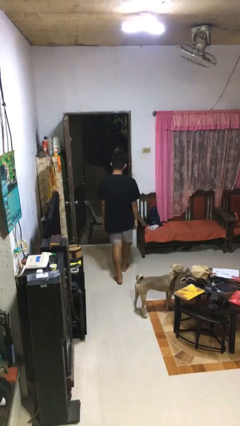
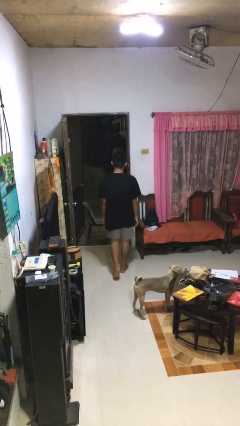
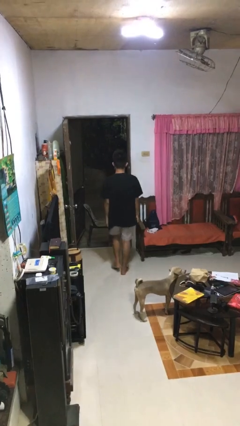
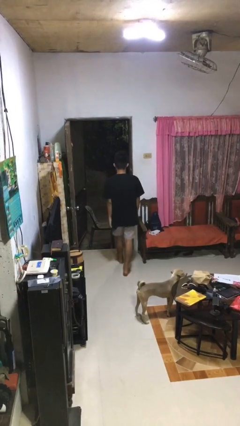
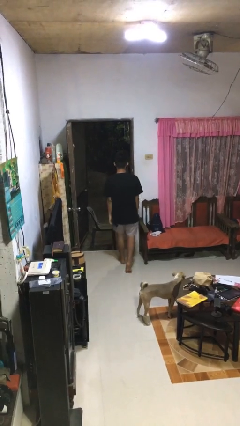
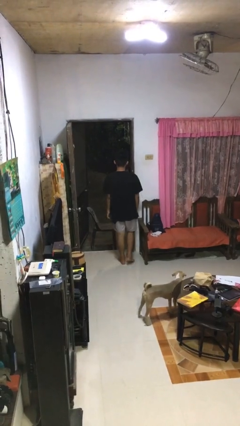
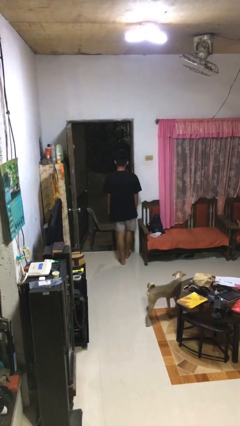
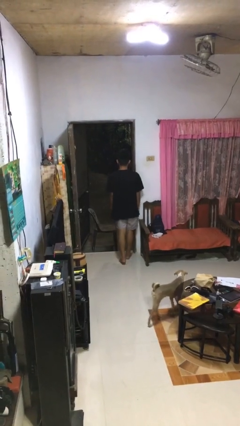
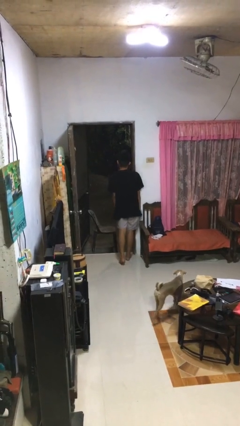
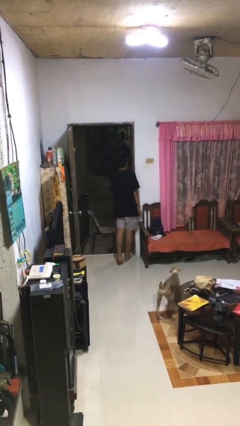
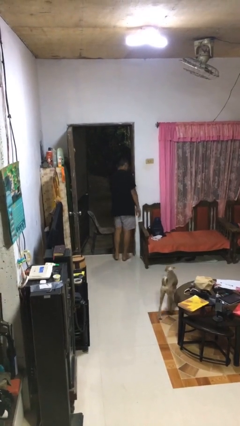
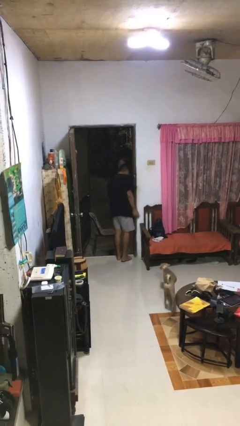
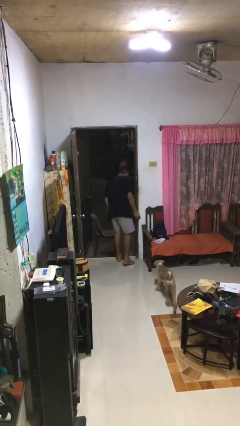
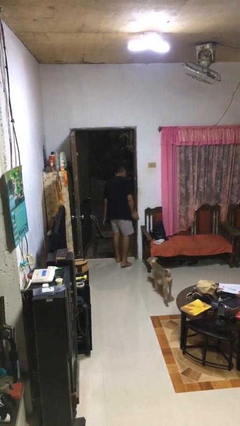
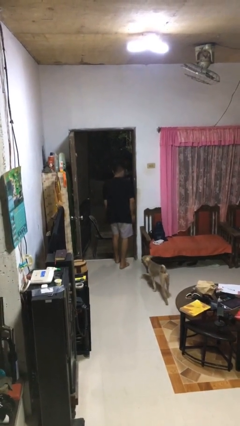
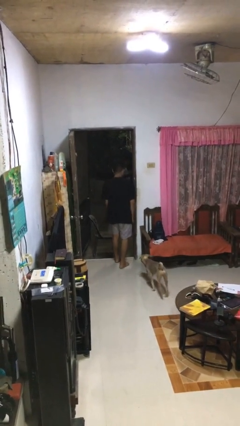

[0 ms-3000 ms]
person bumps into wall

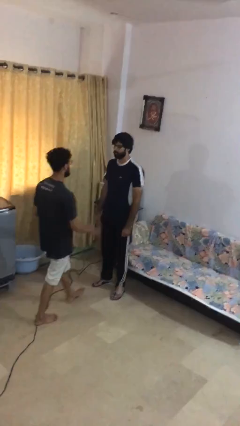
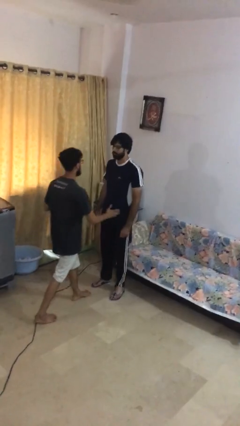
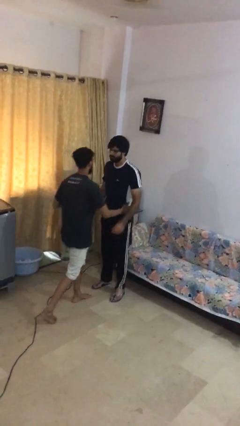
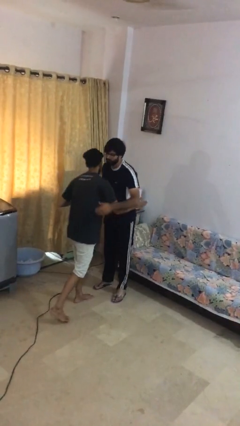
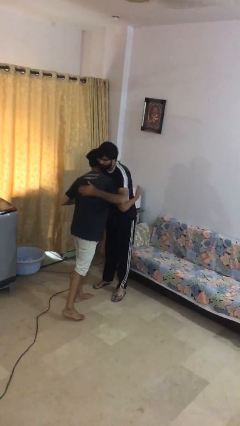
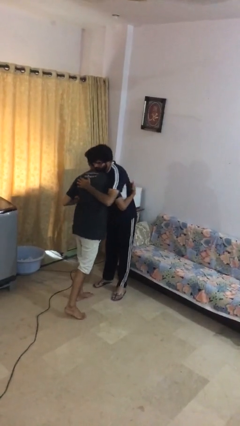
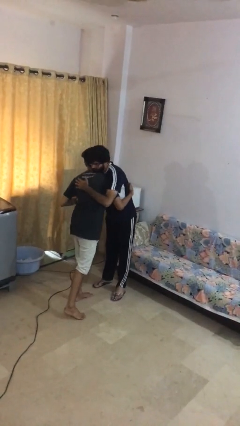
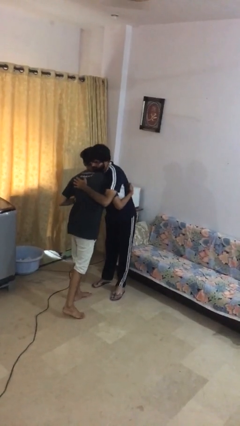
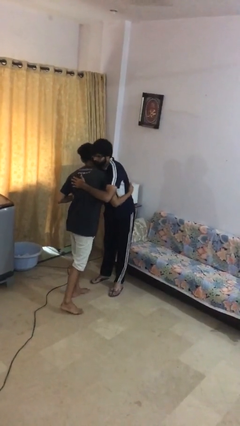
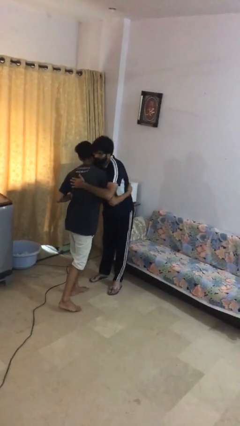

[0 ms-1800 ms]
person embraces person

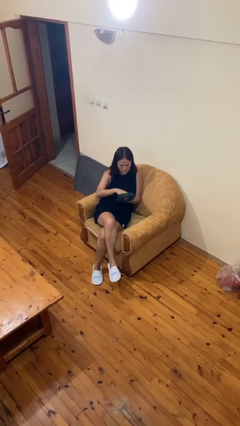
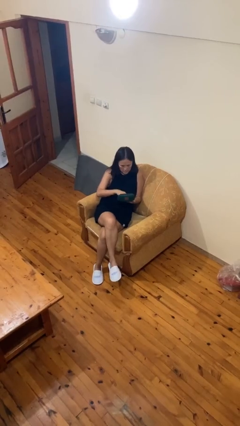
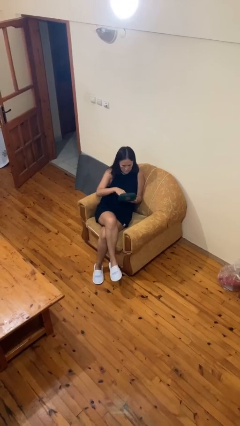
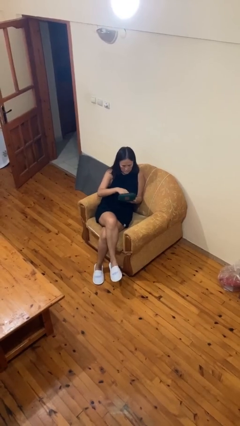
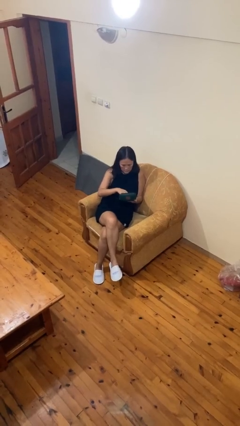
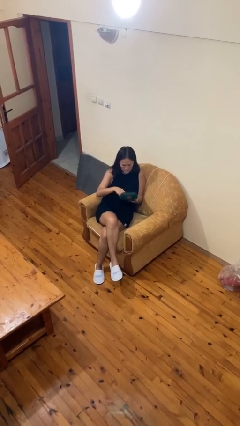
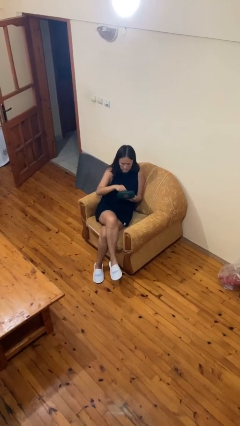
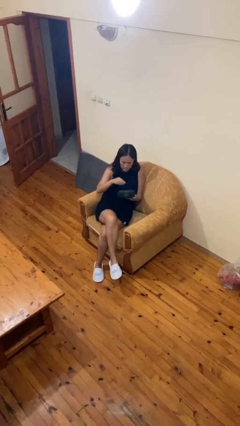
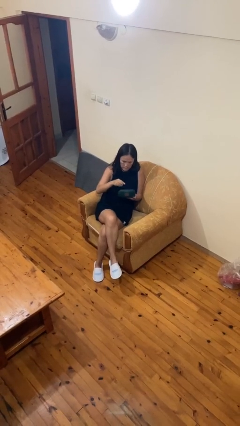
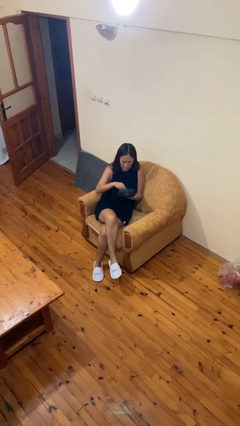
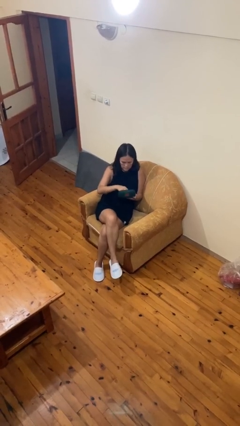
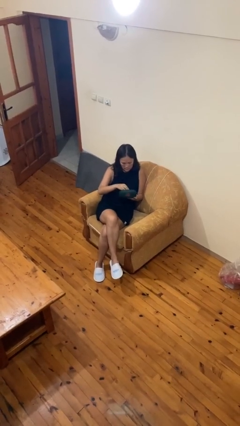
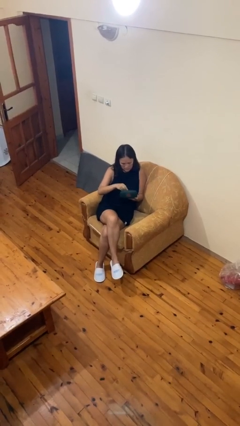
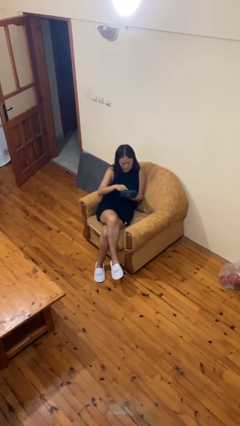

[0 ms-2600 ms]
person searches jewelry box

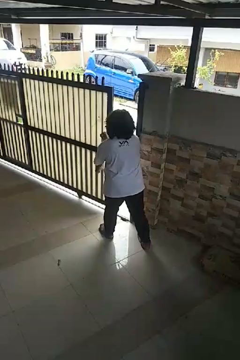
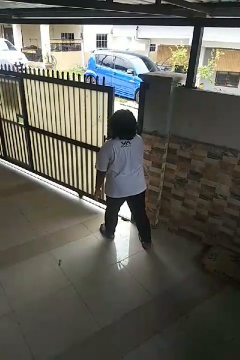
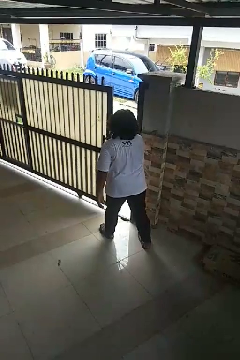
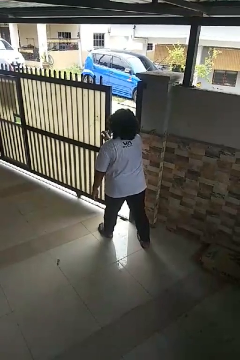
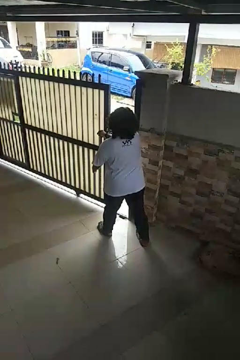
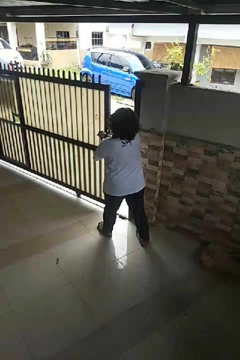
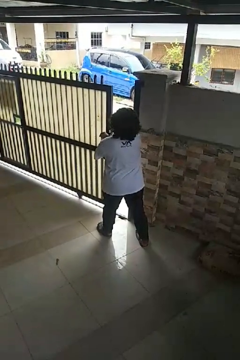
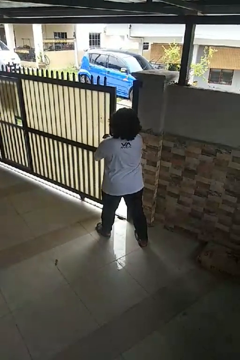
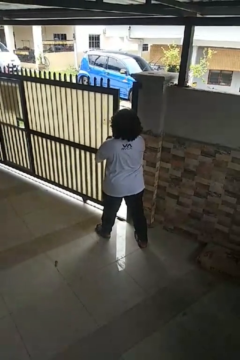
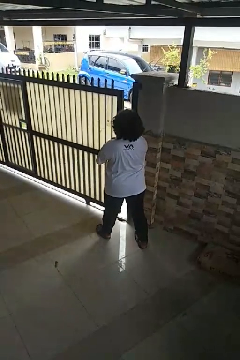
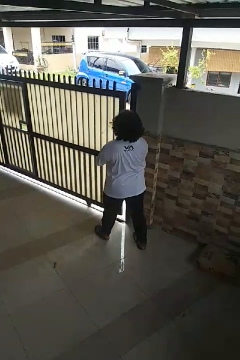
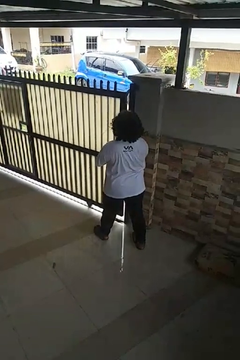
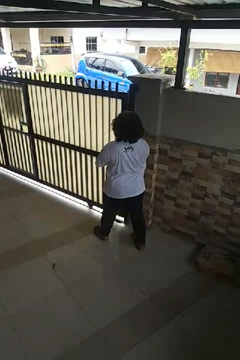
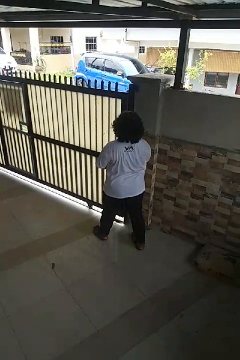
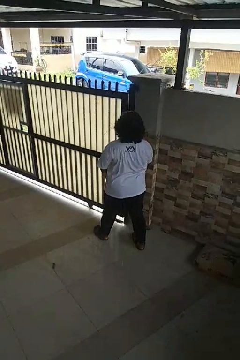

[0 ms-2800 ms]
person closes sliding door

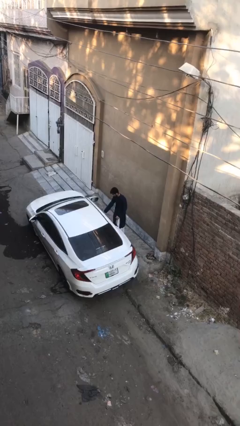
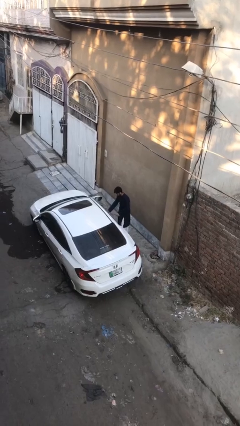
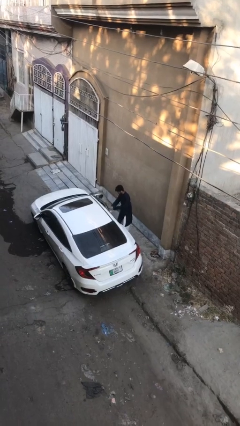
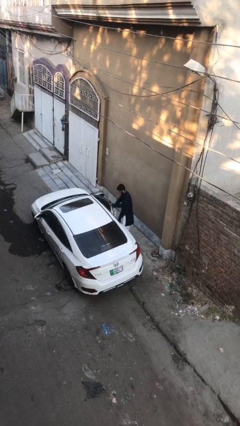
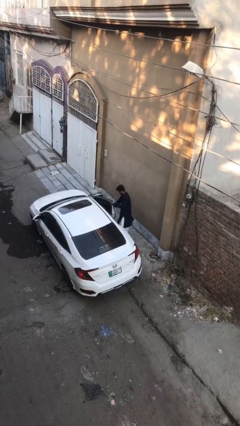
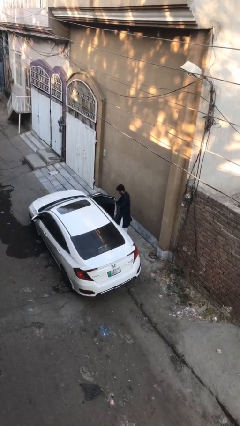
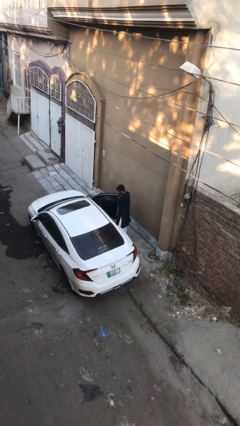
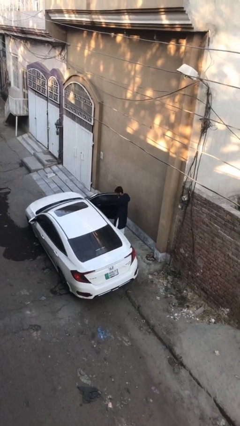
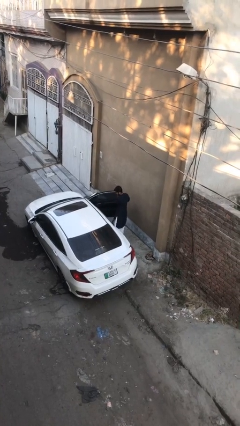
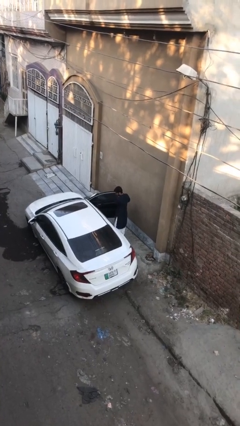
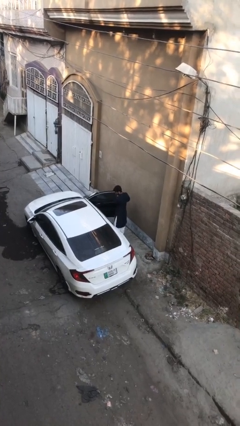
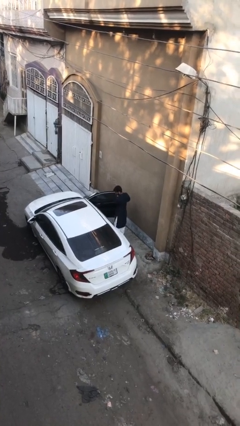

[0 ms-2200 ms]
person opens car door

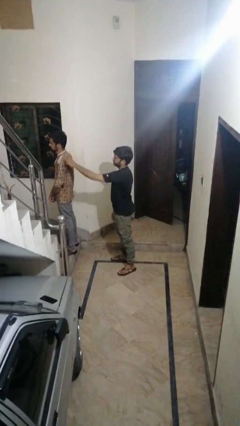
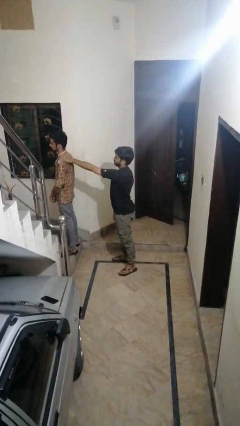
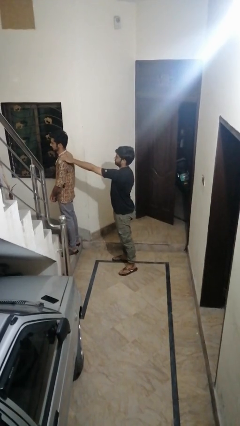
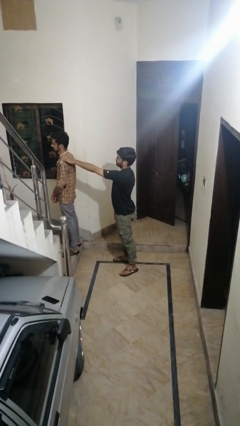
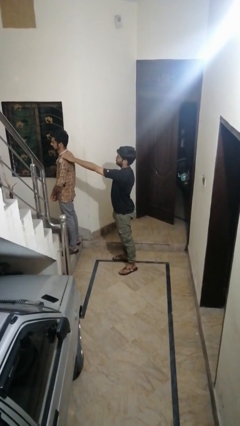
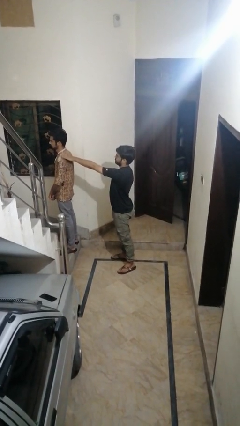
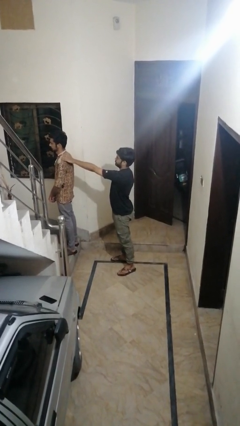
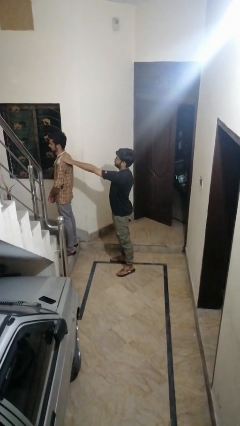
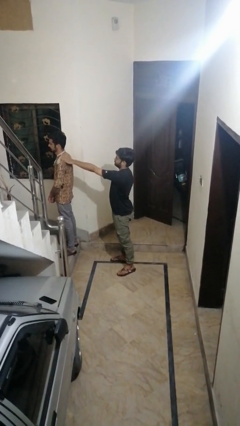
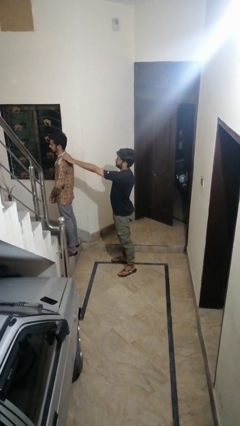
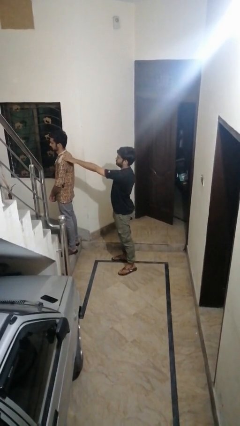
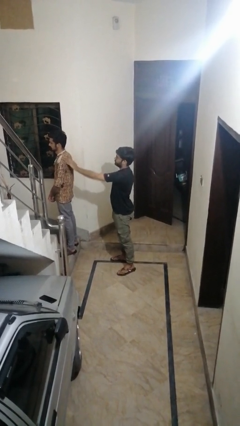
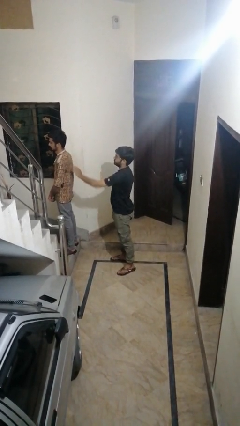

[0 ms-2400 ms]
person touches back of person

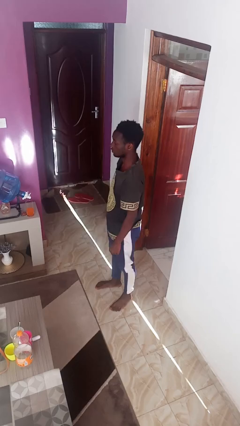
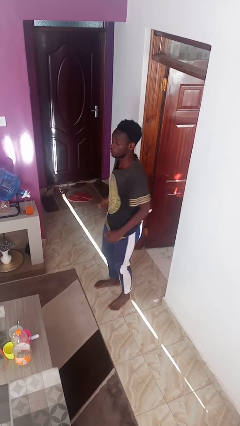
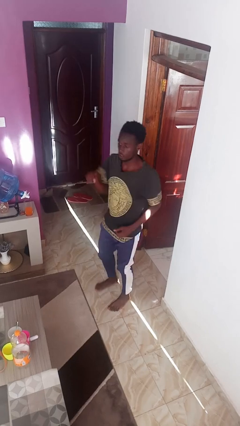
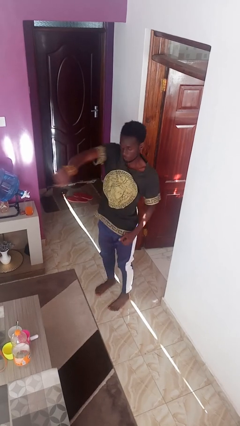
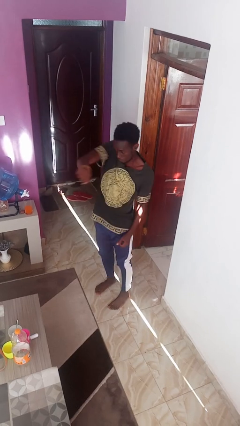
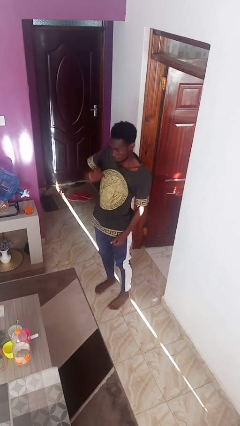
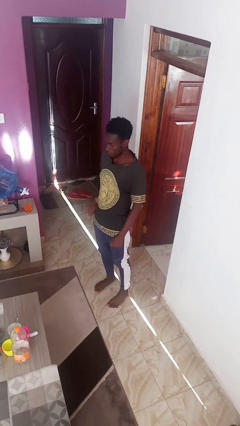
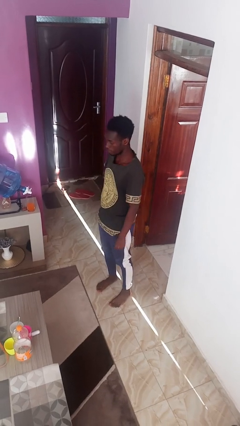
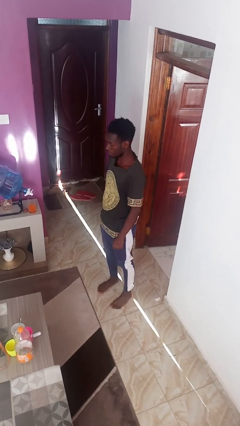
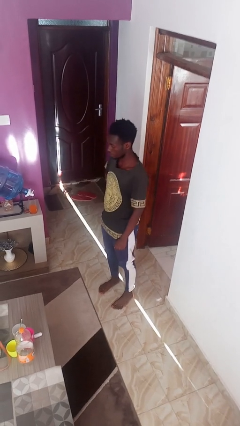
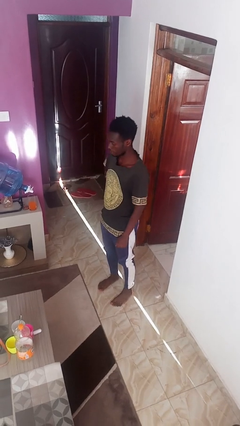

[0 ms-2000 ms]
person punches

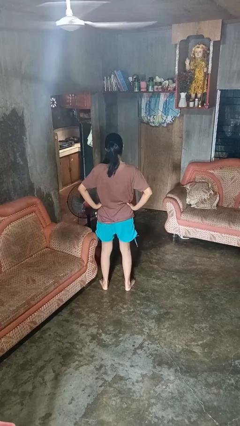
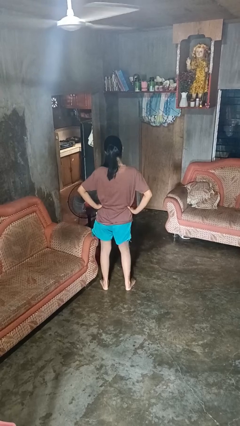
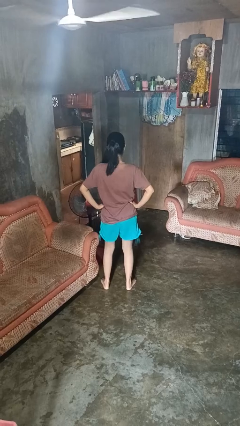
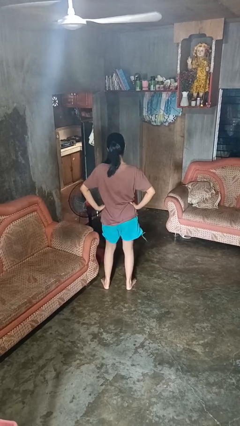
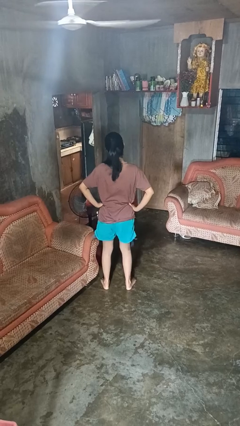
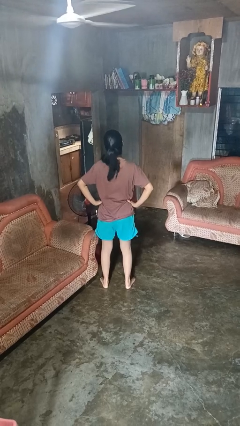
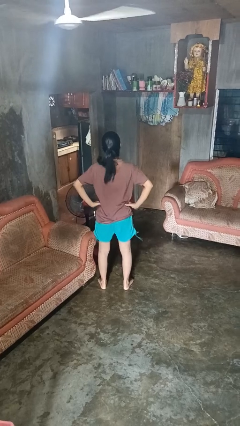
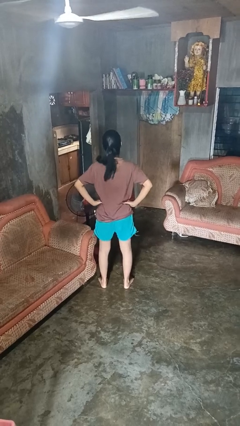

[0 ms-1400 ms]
person wiggles hips
